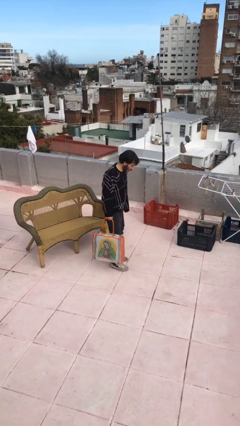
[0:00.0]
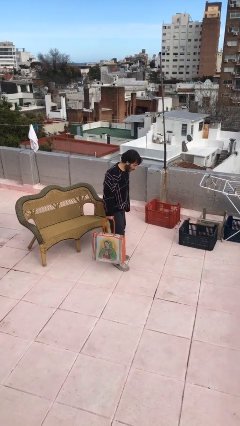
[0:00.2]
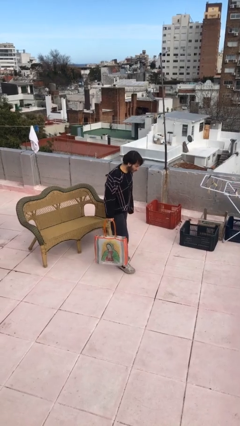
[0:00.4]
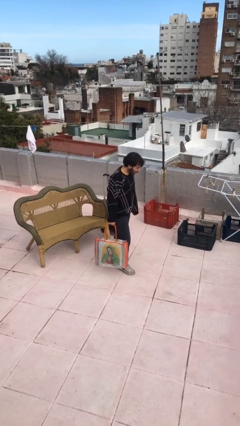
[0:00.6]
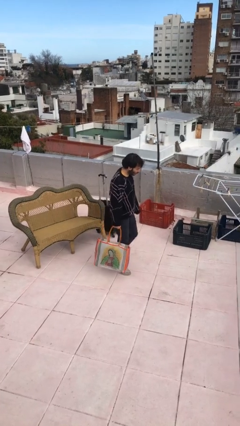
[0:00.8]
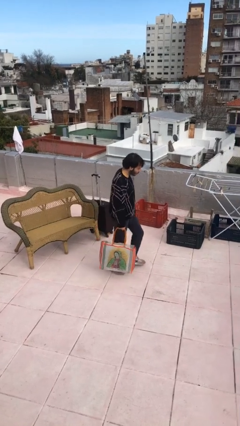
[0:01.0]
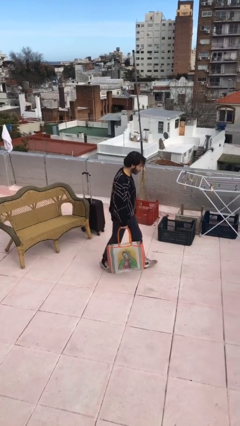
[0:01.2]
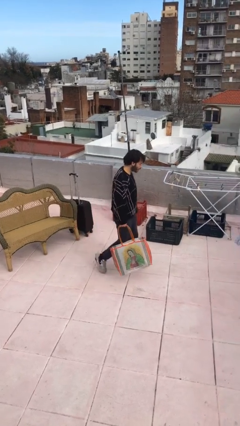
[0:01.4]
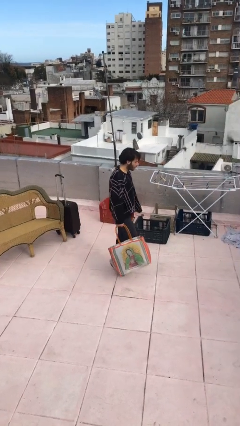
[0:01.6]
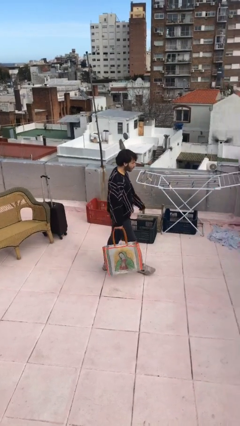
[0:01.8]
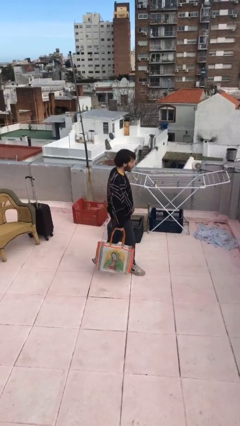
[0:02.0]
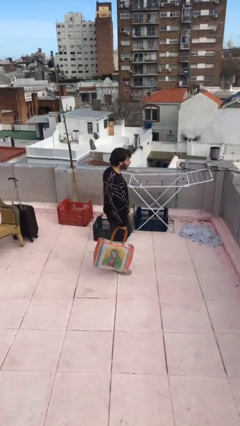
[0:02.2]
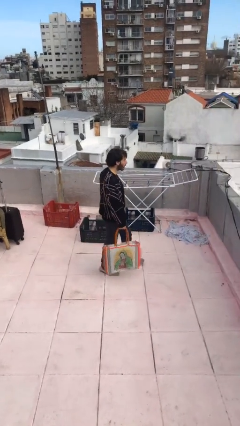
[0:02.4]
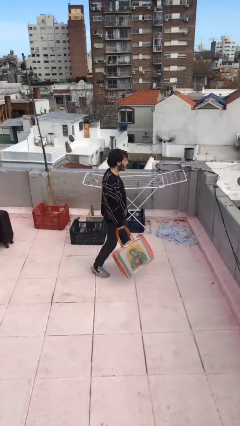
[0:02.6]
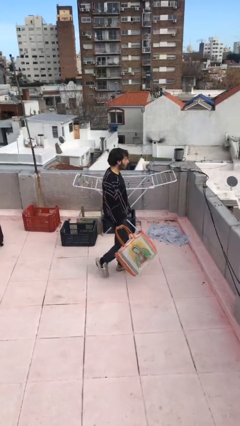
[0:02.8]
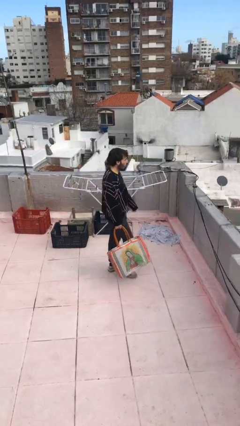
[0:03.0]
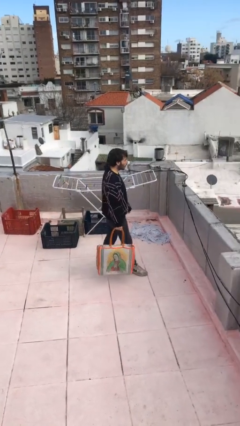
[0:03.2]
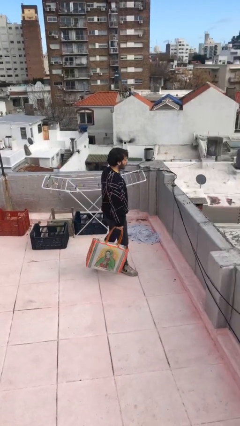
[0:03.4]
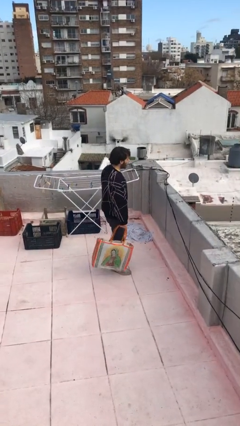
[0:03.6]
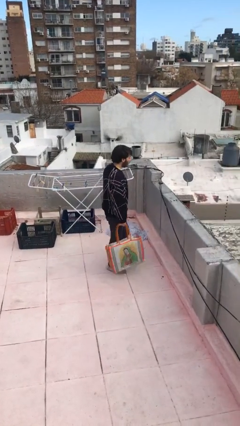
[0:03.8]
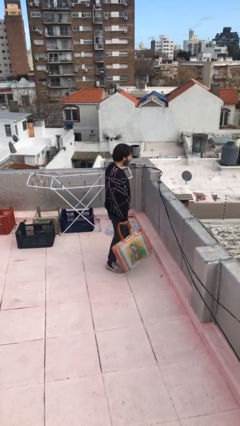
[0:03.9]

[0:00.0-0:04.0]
person carries groceries

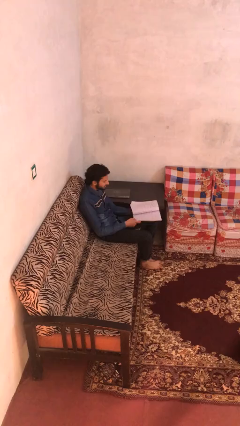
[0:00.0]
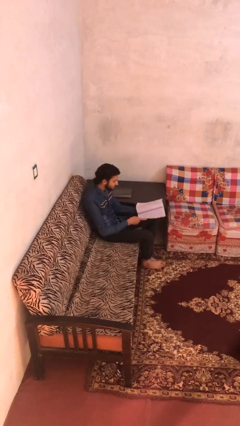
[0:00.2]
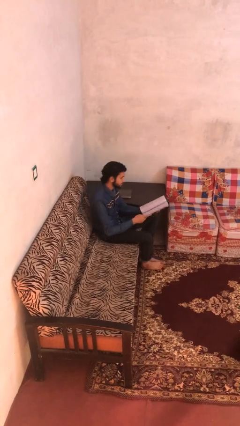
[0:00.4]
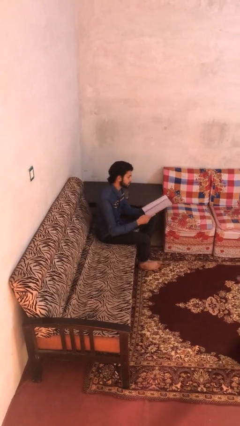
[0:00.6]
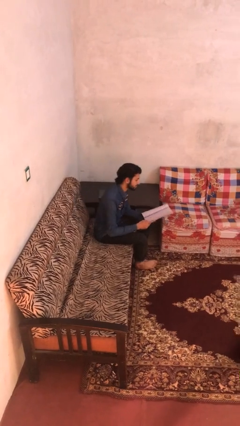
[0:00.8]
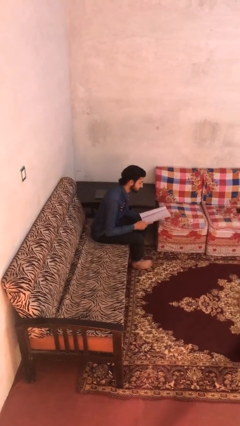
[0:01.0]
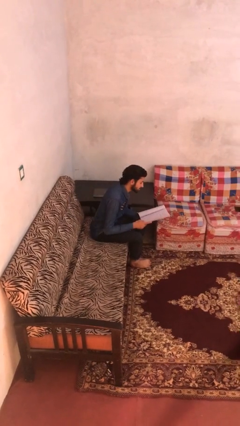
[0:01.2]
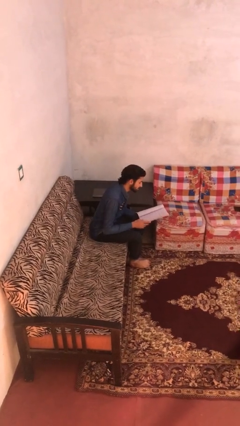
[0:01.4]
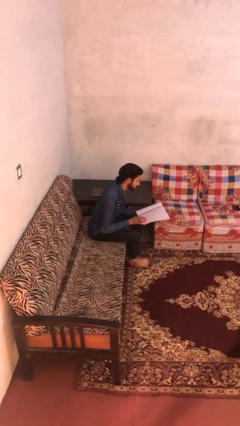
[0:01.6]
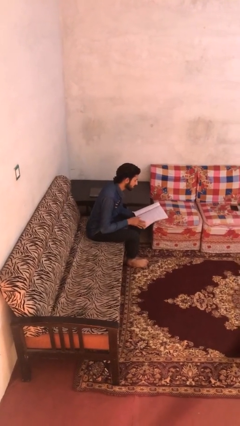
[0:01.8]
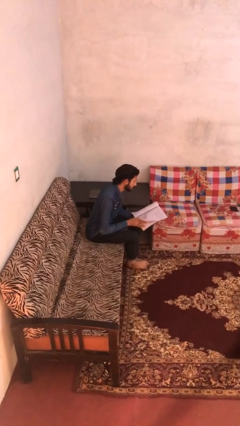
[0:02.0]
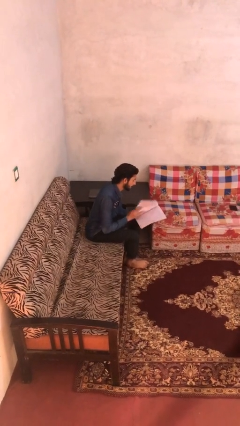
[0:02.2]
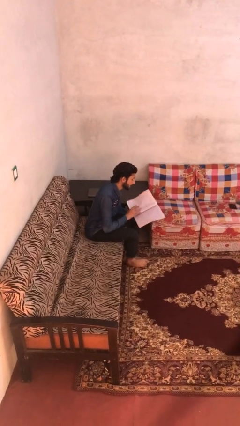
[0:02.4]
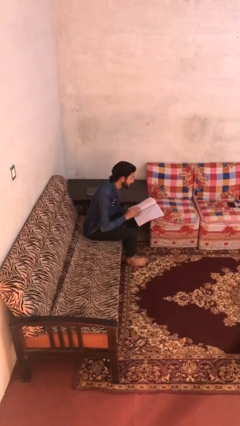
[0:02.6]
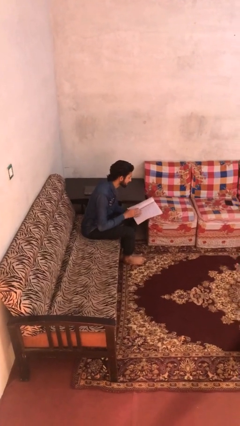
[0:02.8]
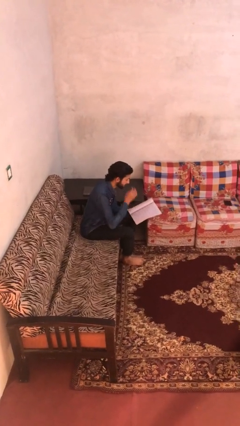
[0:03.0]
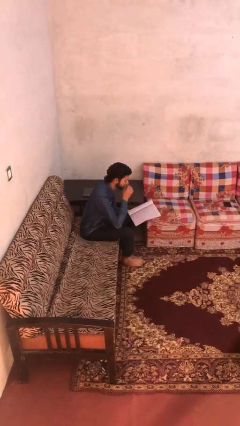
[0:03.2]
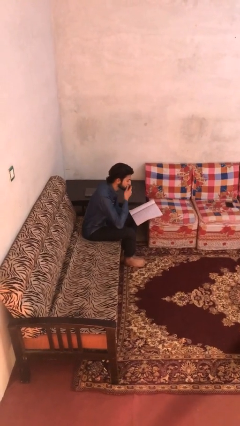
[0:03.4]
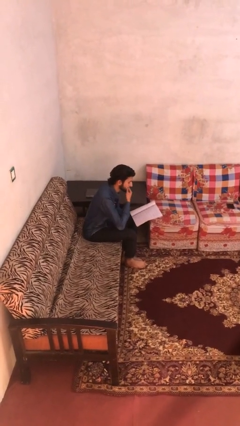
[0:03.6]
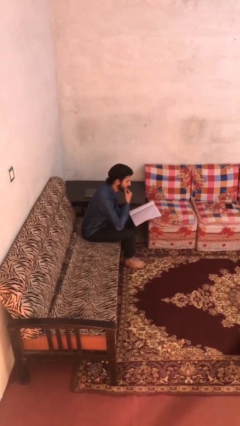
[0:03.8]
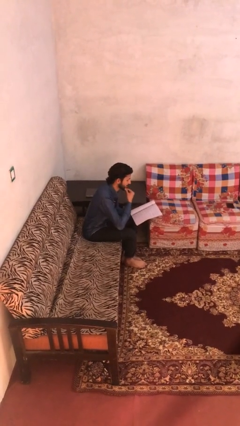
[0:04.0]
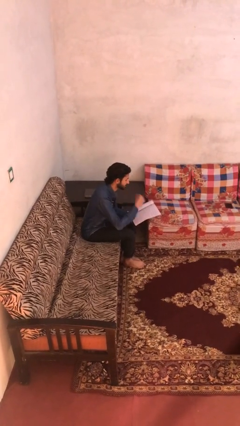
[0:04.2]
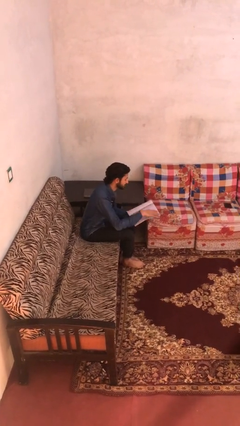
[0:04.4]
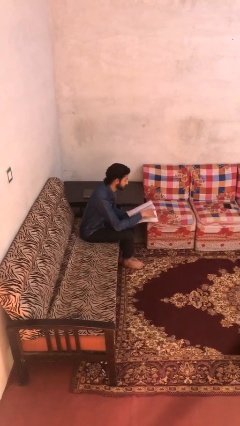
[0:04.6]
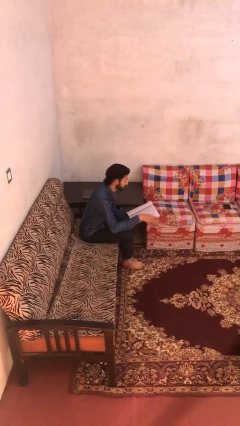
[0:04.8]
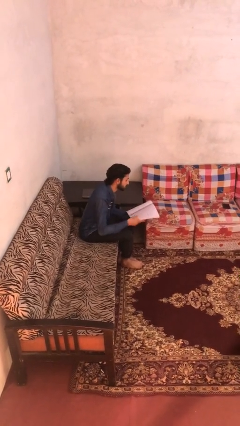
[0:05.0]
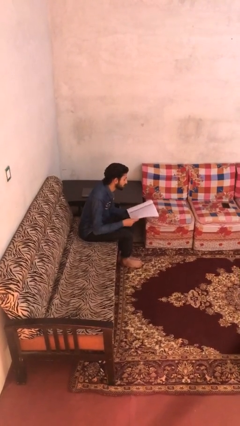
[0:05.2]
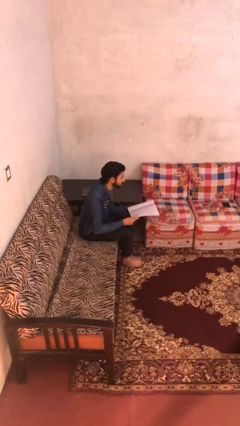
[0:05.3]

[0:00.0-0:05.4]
person reads document

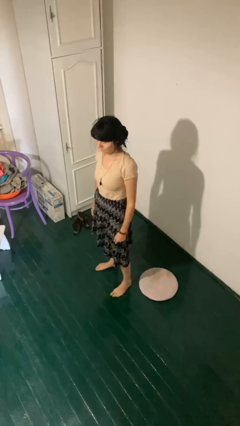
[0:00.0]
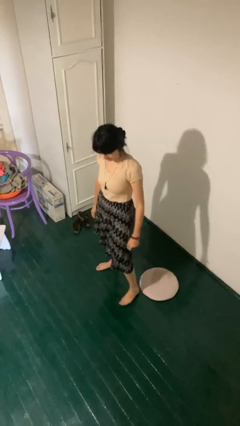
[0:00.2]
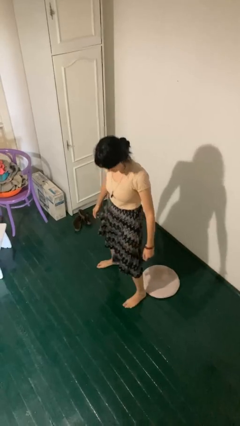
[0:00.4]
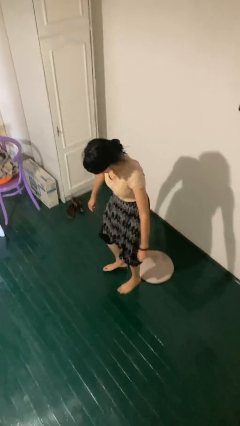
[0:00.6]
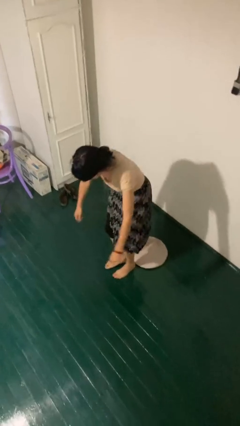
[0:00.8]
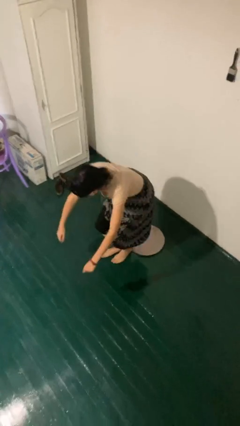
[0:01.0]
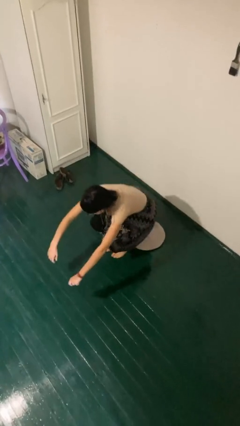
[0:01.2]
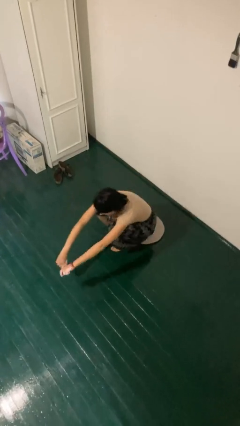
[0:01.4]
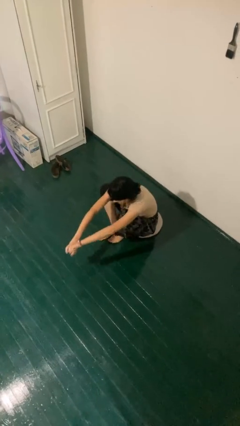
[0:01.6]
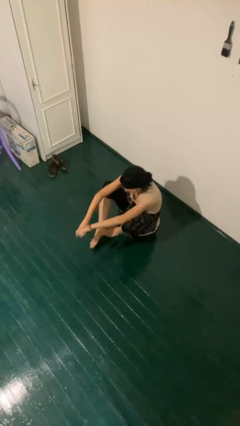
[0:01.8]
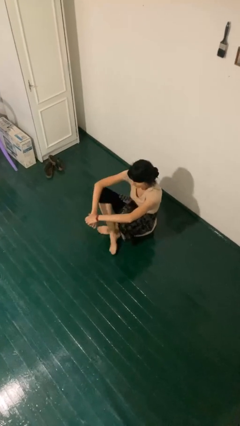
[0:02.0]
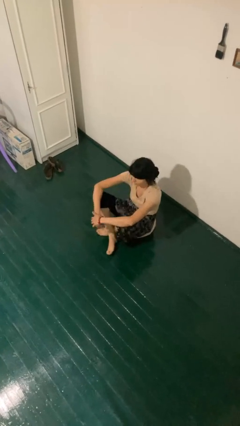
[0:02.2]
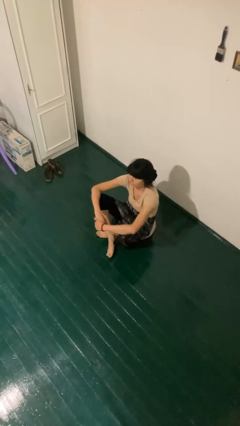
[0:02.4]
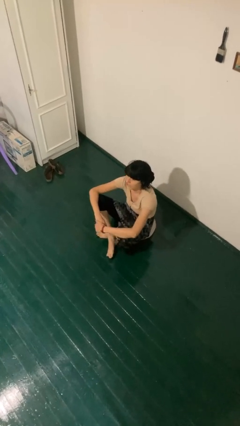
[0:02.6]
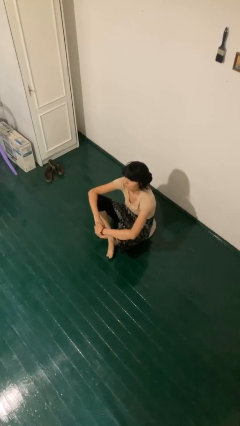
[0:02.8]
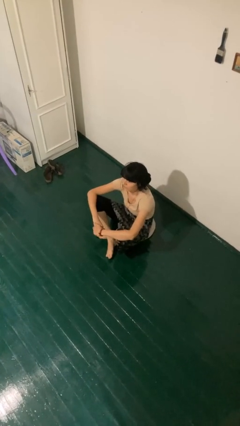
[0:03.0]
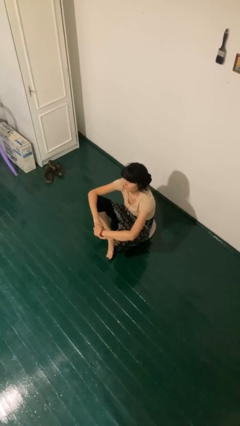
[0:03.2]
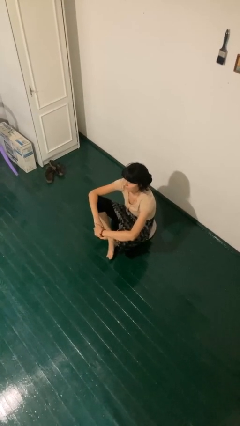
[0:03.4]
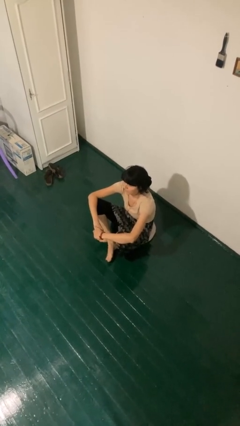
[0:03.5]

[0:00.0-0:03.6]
person sits crisscross

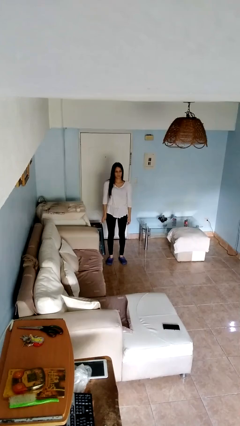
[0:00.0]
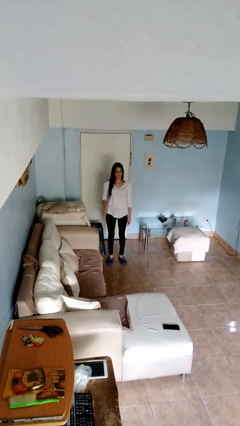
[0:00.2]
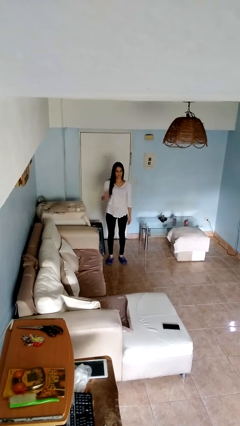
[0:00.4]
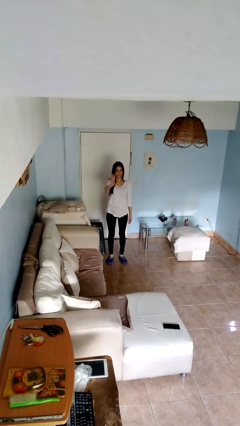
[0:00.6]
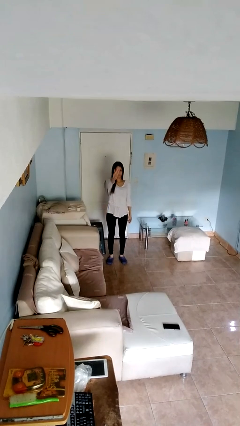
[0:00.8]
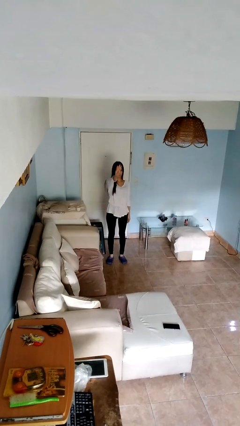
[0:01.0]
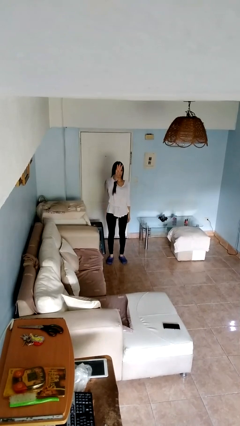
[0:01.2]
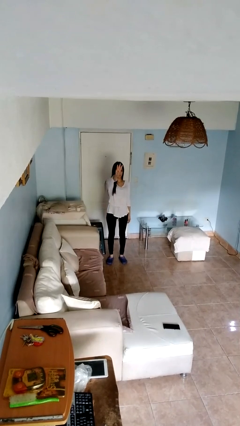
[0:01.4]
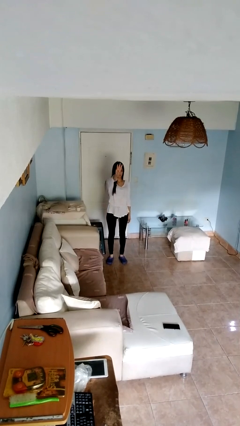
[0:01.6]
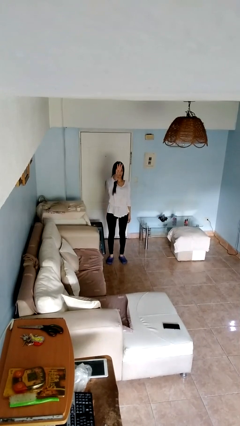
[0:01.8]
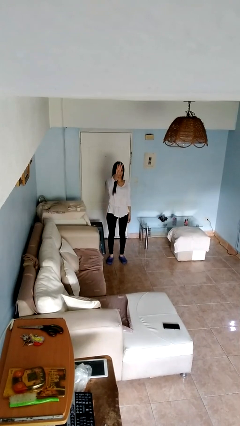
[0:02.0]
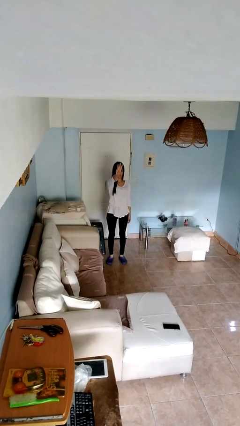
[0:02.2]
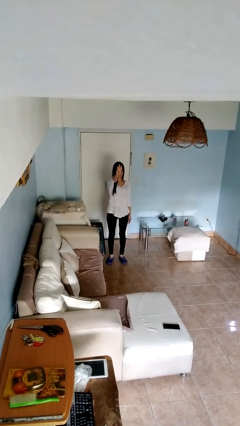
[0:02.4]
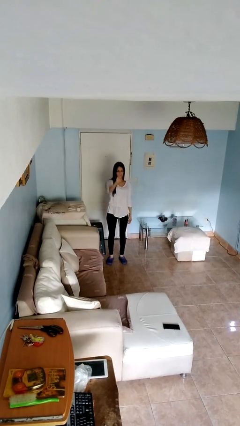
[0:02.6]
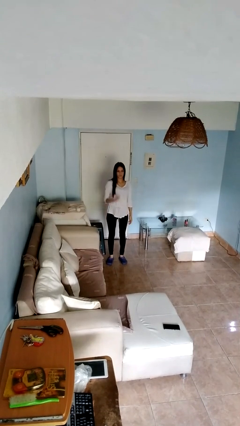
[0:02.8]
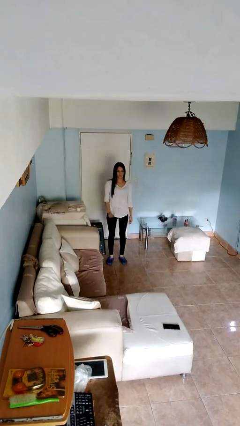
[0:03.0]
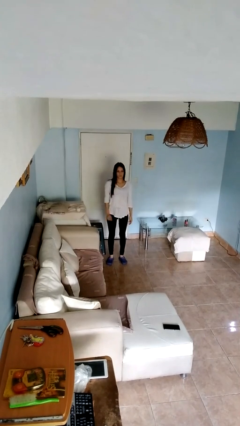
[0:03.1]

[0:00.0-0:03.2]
person gestures number three

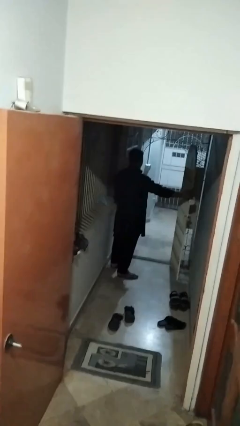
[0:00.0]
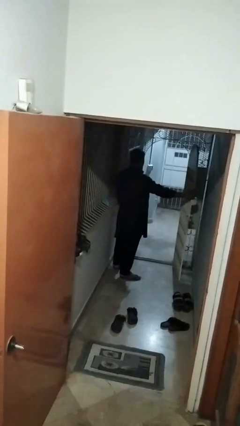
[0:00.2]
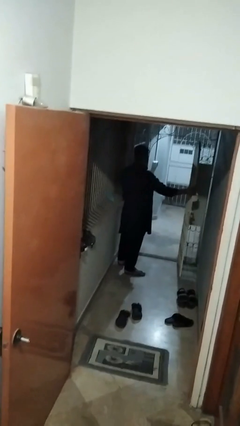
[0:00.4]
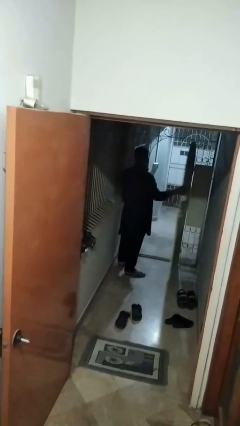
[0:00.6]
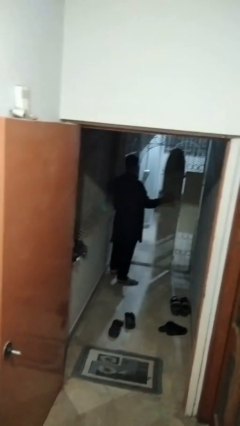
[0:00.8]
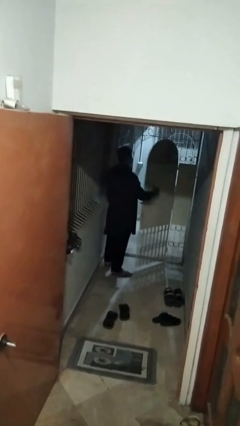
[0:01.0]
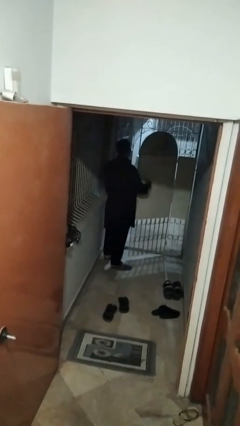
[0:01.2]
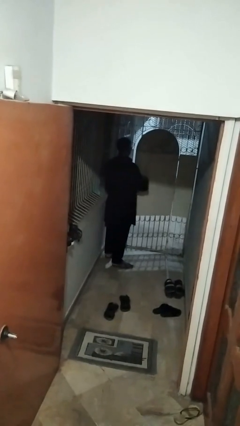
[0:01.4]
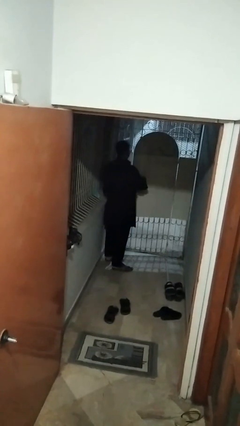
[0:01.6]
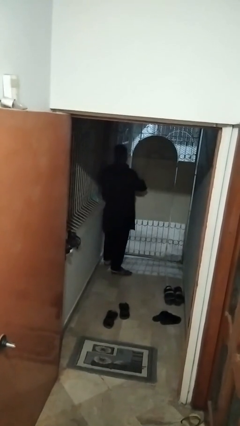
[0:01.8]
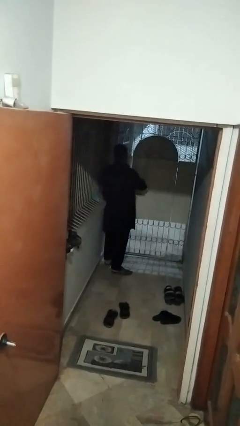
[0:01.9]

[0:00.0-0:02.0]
person closes gate
